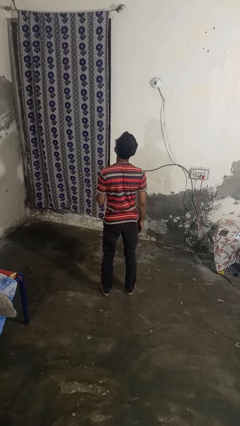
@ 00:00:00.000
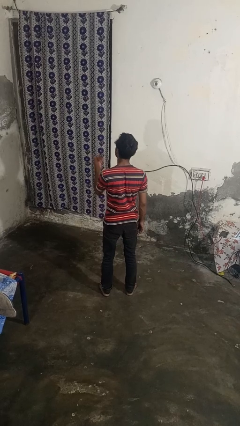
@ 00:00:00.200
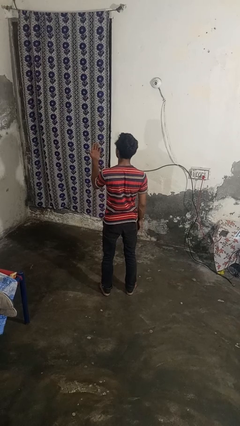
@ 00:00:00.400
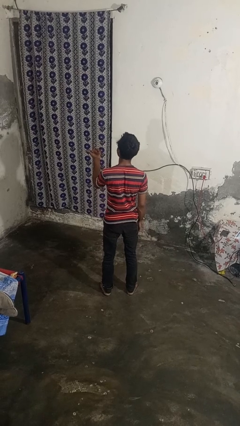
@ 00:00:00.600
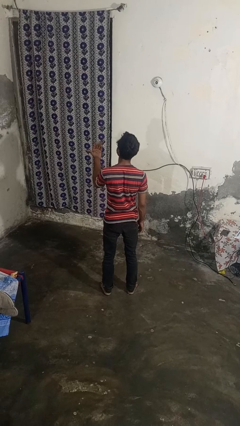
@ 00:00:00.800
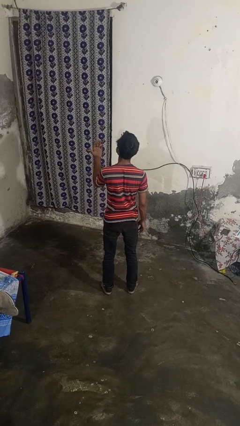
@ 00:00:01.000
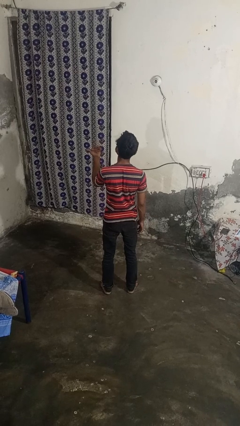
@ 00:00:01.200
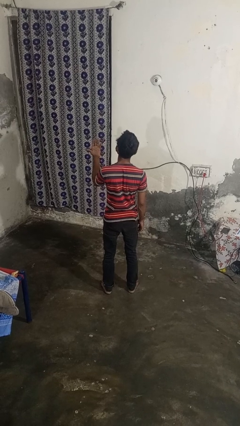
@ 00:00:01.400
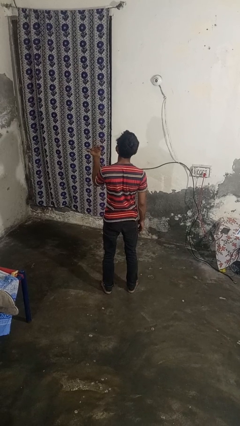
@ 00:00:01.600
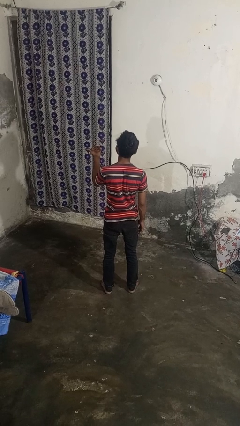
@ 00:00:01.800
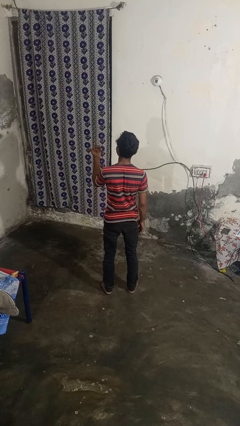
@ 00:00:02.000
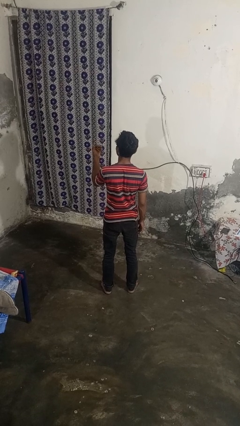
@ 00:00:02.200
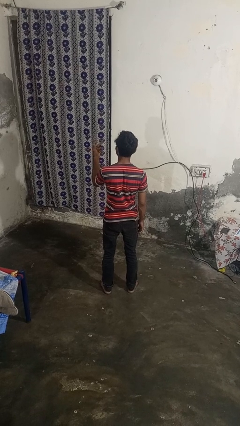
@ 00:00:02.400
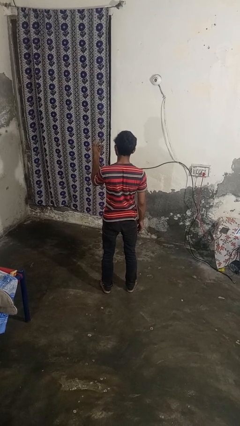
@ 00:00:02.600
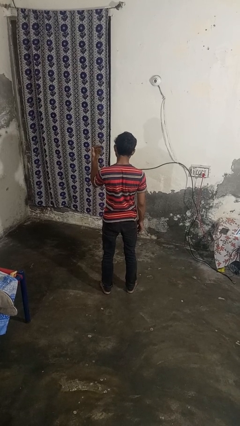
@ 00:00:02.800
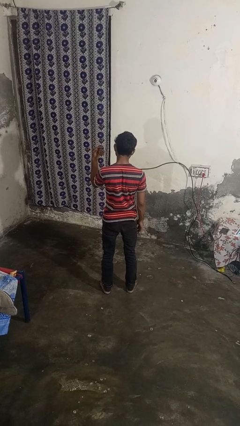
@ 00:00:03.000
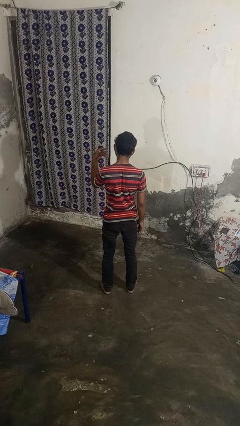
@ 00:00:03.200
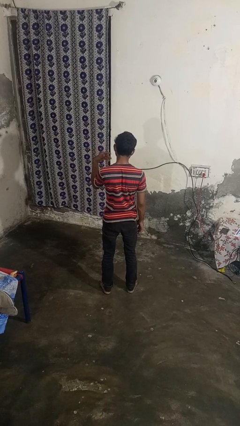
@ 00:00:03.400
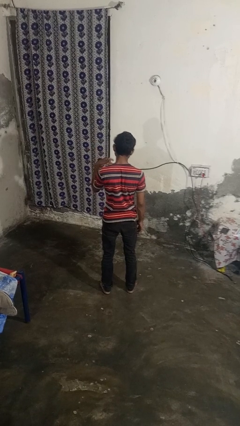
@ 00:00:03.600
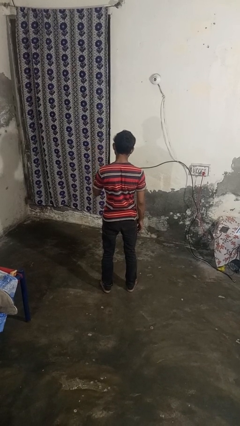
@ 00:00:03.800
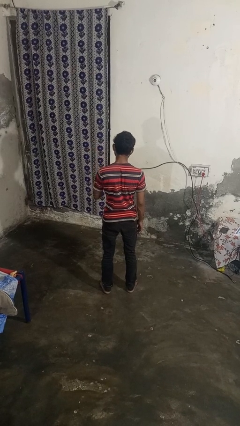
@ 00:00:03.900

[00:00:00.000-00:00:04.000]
person gestures come here

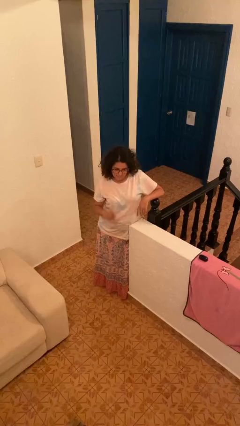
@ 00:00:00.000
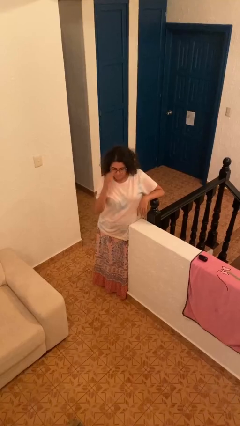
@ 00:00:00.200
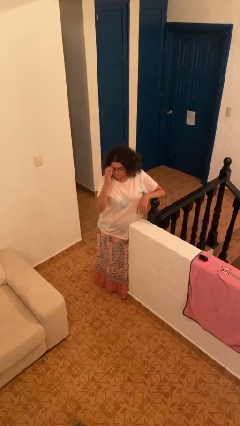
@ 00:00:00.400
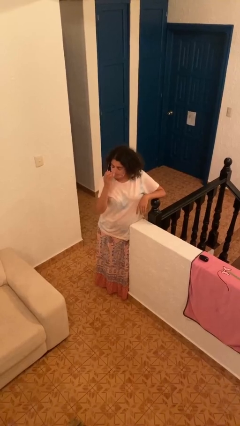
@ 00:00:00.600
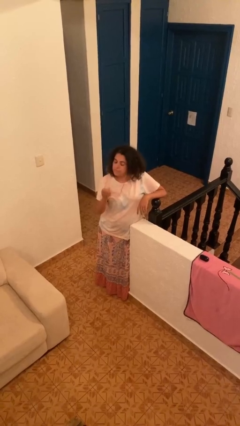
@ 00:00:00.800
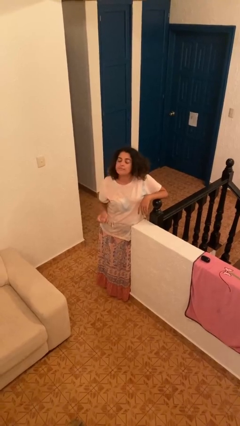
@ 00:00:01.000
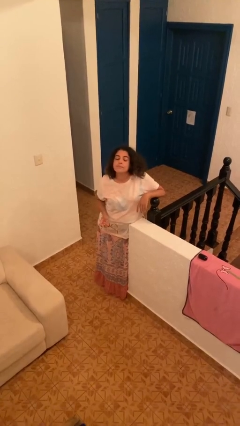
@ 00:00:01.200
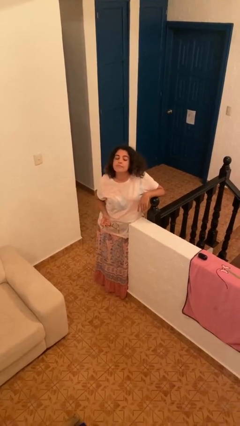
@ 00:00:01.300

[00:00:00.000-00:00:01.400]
person takes off glasses

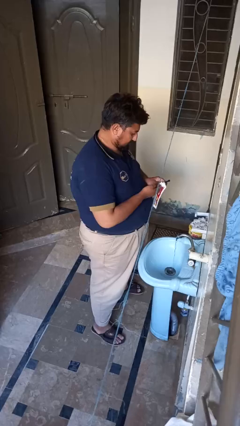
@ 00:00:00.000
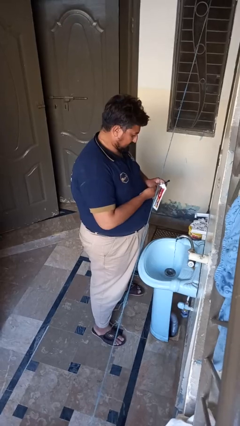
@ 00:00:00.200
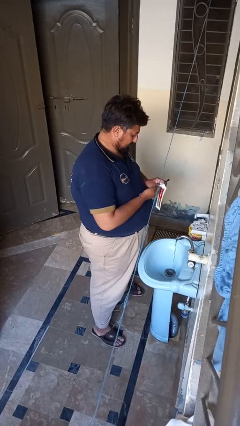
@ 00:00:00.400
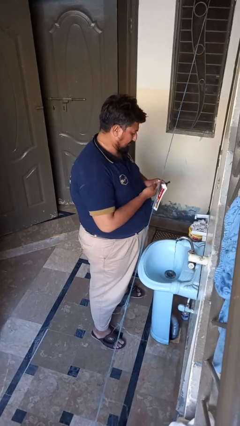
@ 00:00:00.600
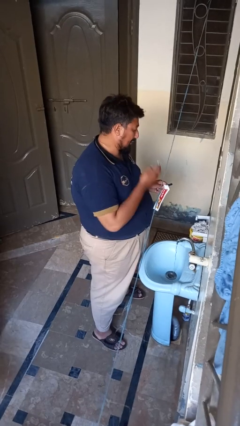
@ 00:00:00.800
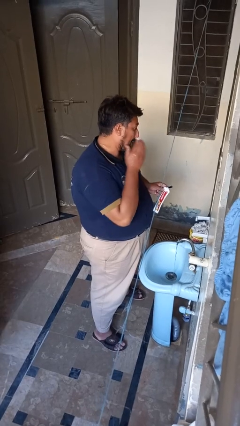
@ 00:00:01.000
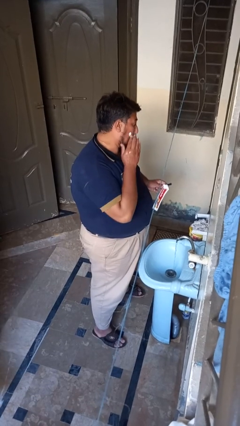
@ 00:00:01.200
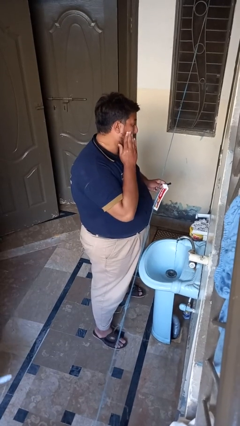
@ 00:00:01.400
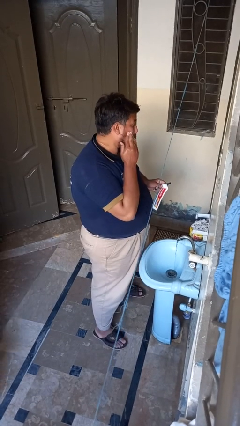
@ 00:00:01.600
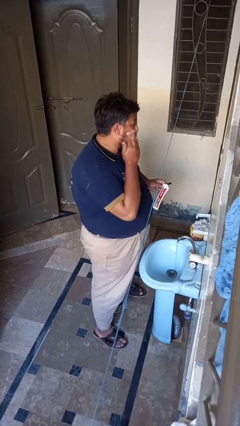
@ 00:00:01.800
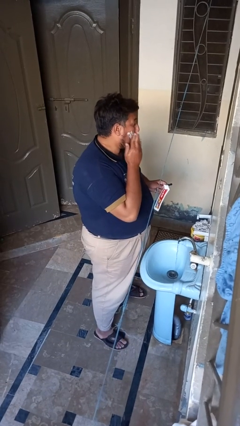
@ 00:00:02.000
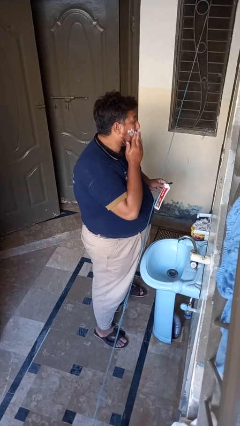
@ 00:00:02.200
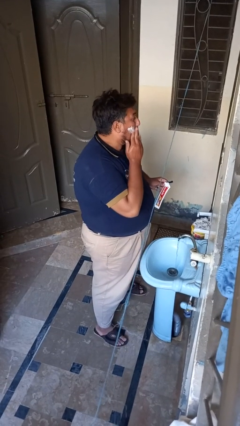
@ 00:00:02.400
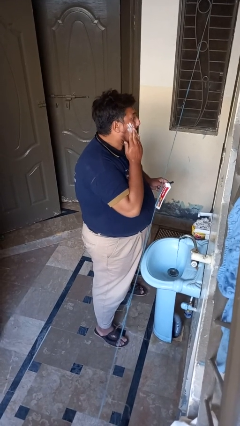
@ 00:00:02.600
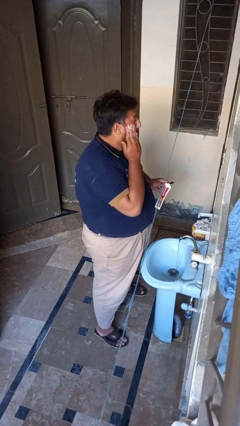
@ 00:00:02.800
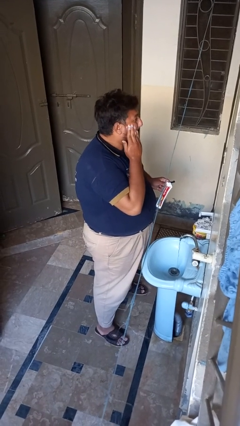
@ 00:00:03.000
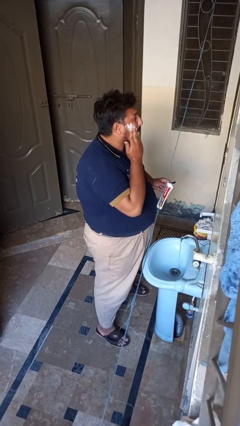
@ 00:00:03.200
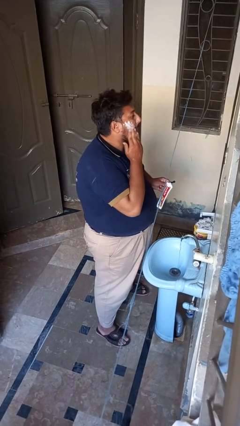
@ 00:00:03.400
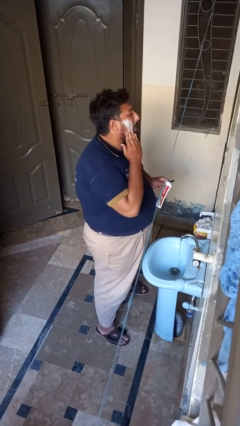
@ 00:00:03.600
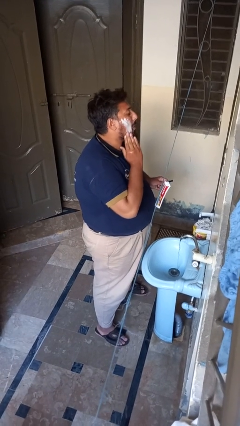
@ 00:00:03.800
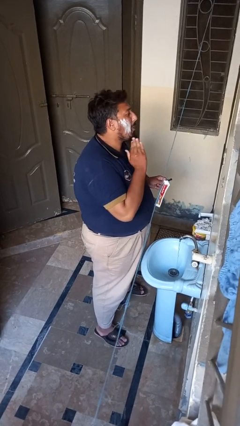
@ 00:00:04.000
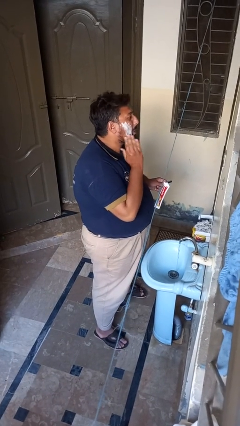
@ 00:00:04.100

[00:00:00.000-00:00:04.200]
person applies shaving cream

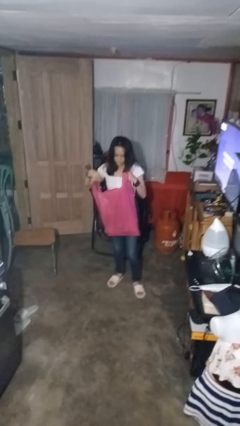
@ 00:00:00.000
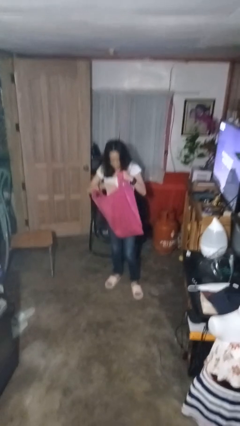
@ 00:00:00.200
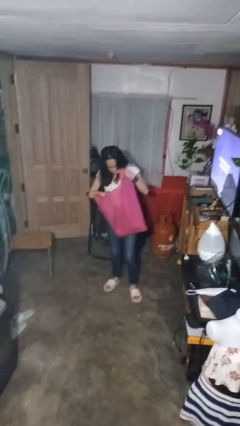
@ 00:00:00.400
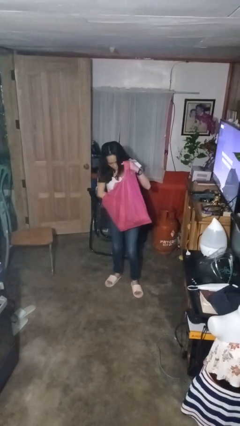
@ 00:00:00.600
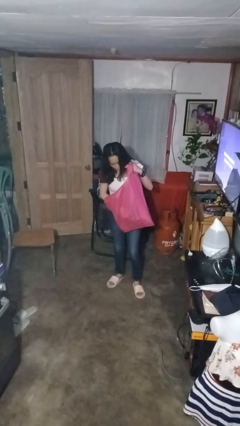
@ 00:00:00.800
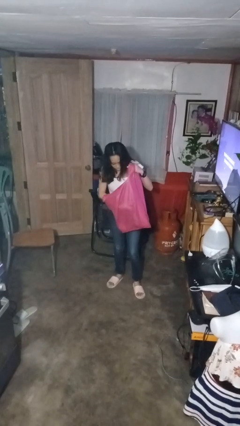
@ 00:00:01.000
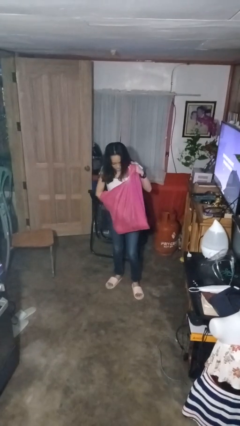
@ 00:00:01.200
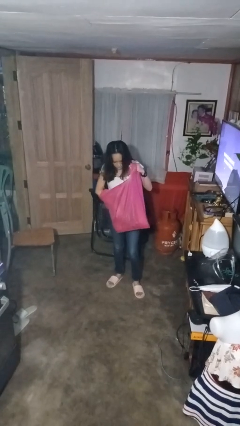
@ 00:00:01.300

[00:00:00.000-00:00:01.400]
person searches in bag

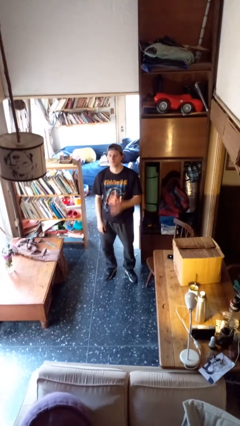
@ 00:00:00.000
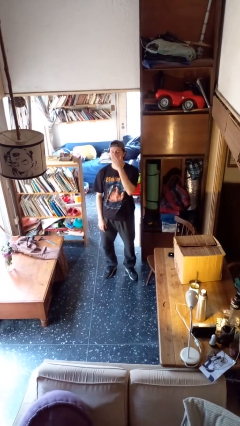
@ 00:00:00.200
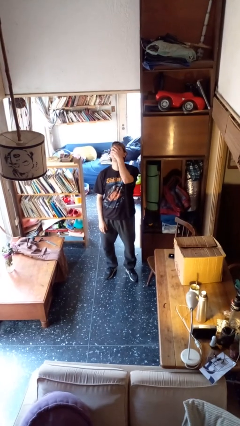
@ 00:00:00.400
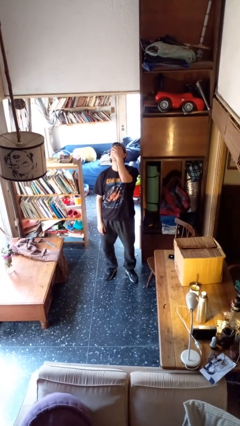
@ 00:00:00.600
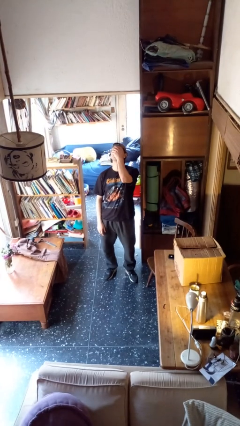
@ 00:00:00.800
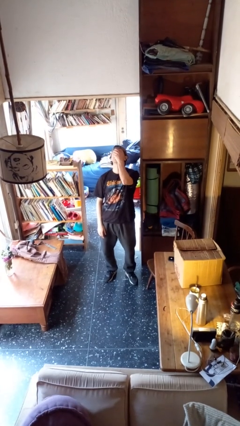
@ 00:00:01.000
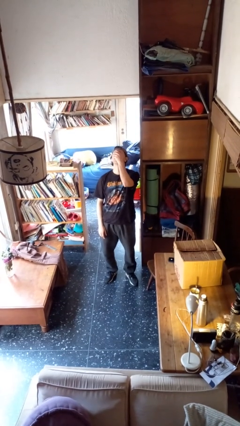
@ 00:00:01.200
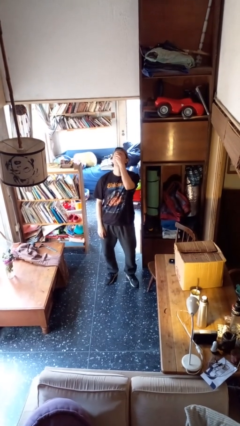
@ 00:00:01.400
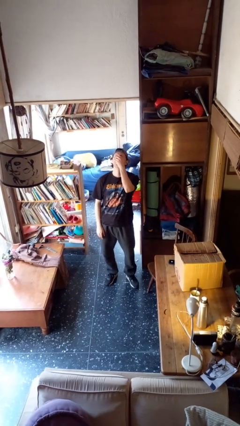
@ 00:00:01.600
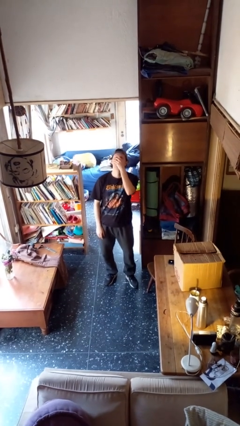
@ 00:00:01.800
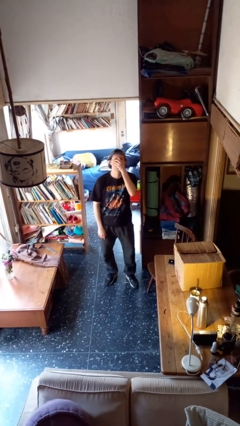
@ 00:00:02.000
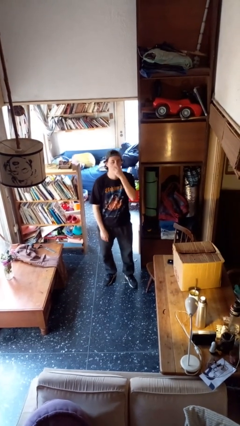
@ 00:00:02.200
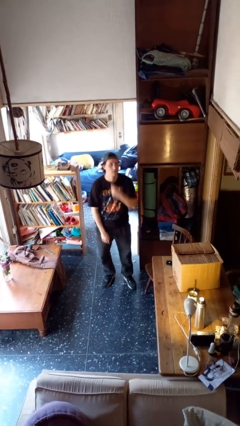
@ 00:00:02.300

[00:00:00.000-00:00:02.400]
person covers face with hands

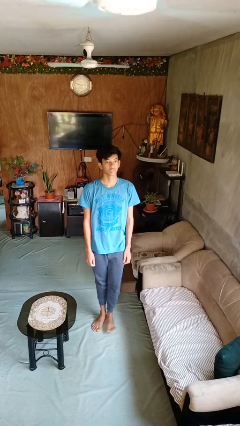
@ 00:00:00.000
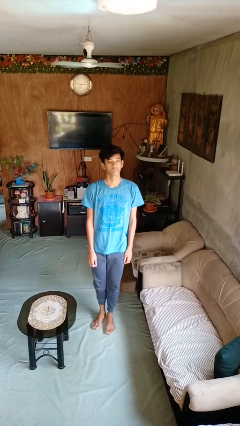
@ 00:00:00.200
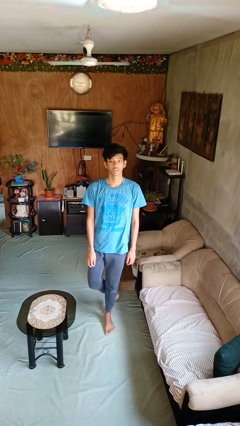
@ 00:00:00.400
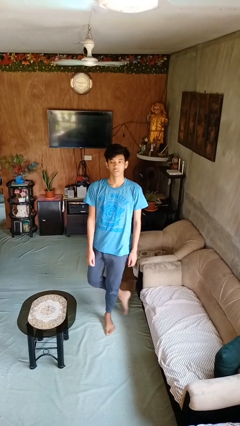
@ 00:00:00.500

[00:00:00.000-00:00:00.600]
person twirls

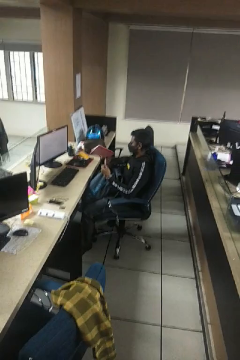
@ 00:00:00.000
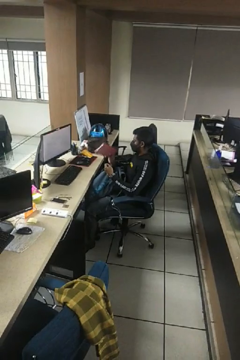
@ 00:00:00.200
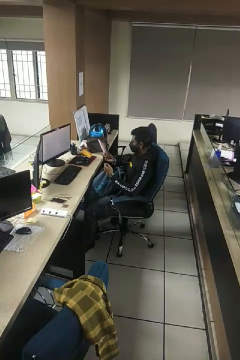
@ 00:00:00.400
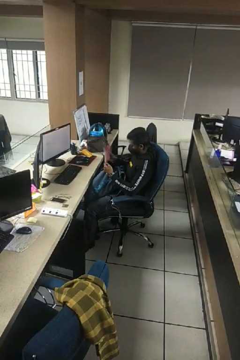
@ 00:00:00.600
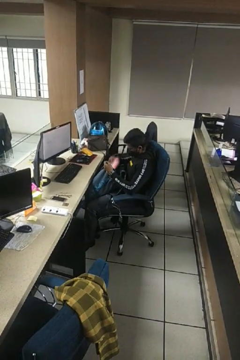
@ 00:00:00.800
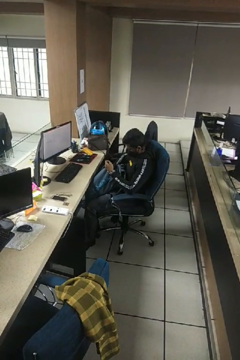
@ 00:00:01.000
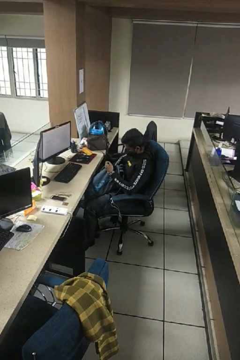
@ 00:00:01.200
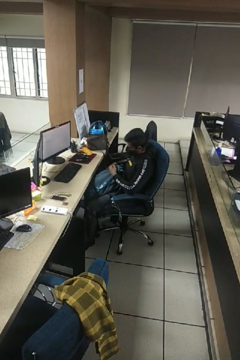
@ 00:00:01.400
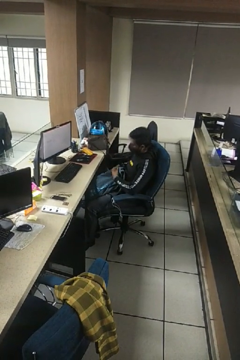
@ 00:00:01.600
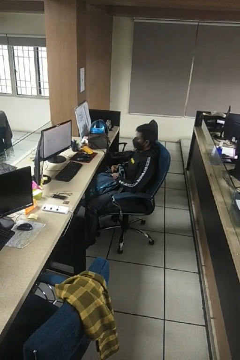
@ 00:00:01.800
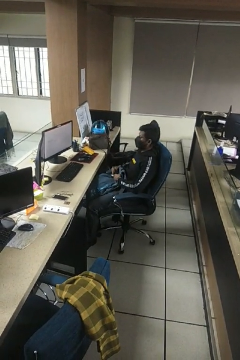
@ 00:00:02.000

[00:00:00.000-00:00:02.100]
person puts object into backpack

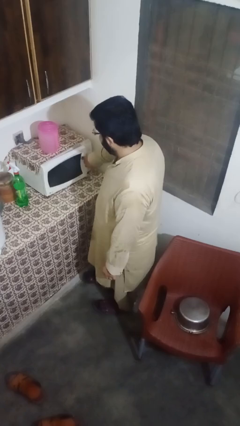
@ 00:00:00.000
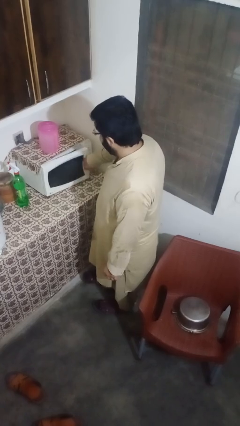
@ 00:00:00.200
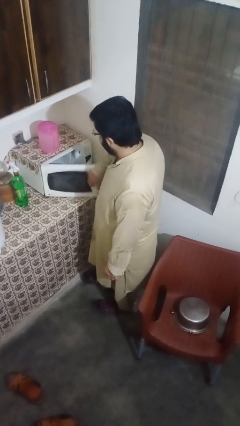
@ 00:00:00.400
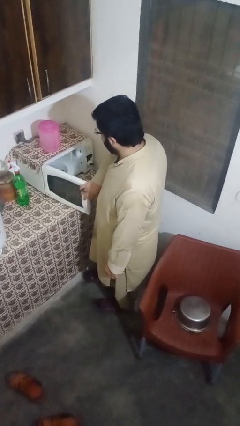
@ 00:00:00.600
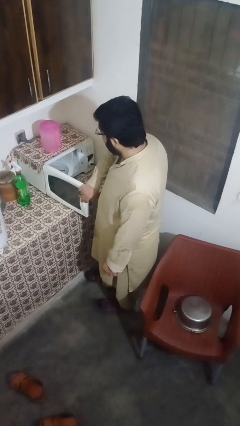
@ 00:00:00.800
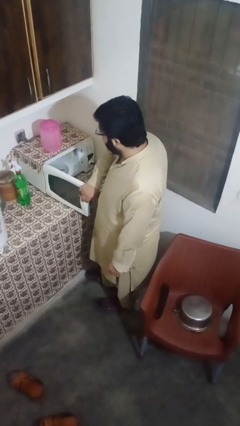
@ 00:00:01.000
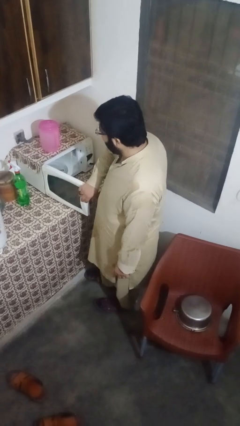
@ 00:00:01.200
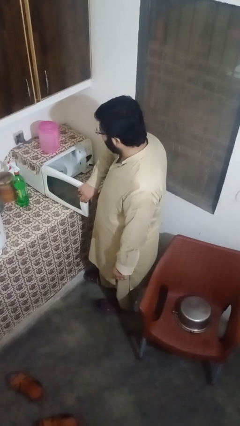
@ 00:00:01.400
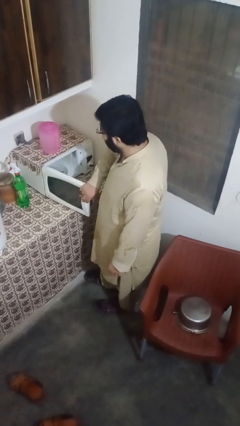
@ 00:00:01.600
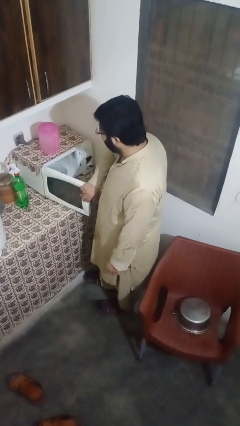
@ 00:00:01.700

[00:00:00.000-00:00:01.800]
person opens microwave
